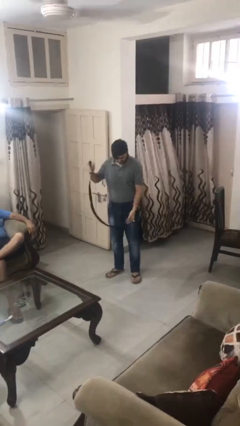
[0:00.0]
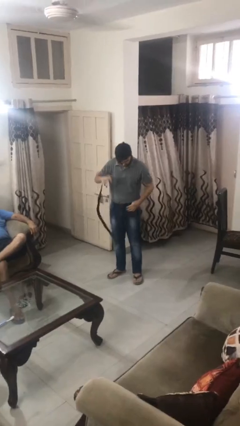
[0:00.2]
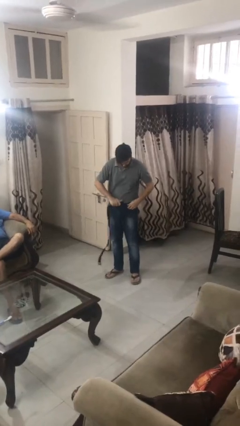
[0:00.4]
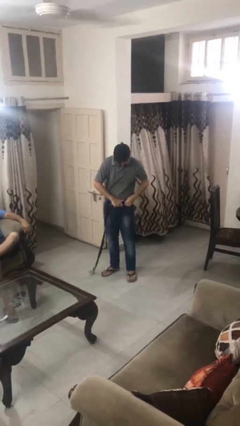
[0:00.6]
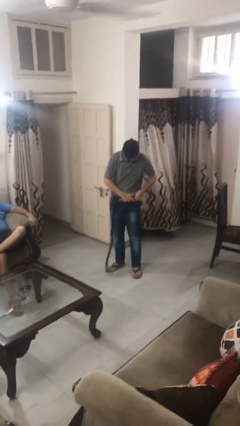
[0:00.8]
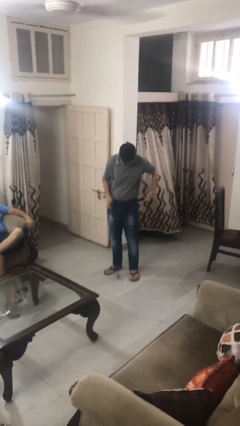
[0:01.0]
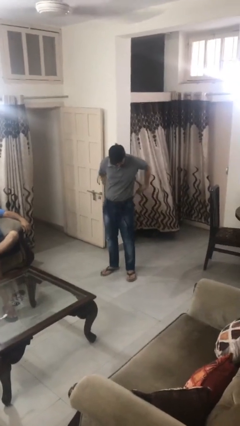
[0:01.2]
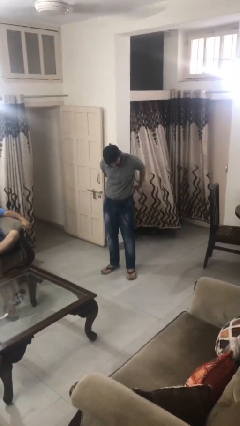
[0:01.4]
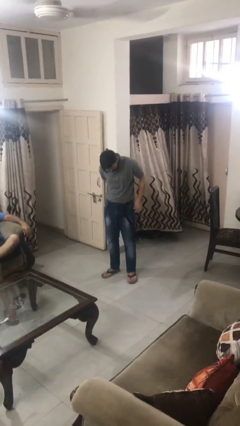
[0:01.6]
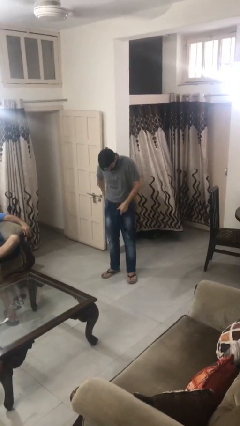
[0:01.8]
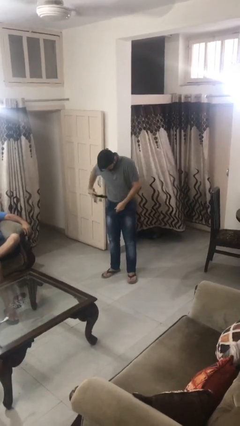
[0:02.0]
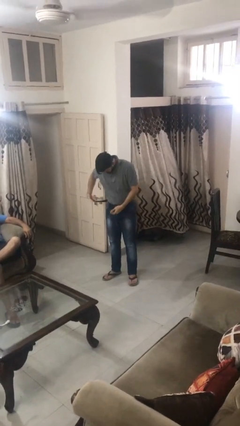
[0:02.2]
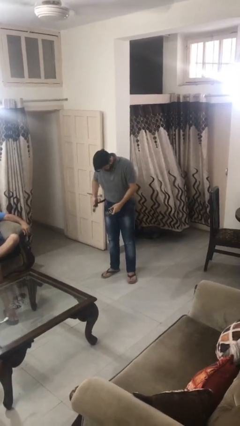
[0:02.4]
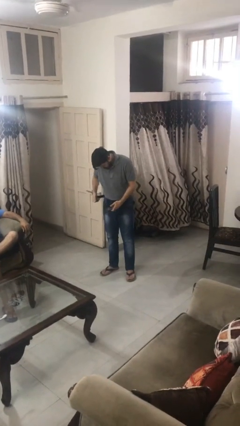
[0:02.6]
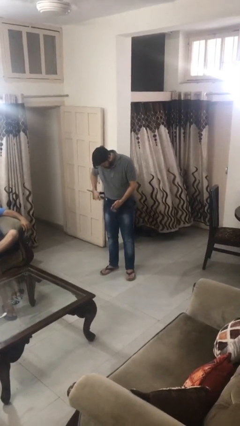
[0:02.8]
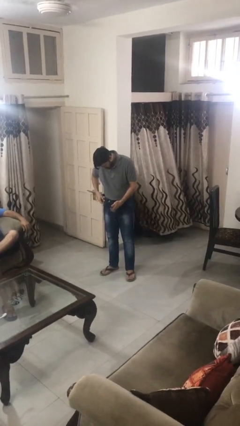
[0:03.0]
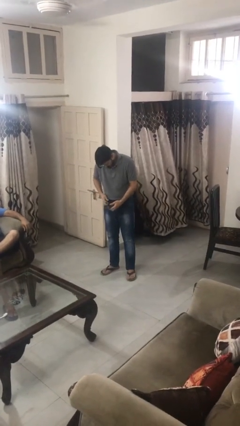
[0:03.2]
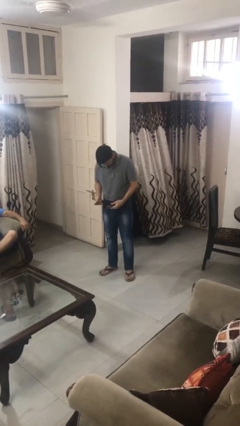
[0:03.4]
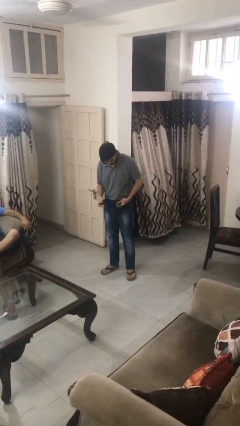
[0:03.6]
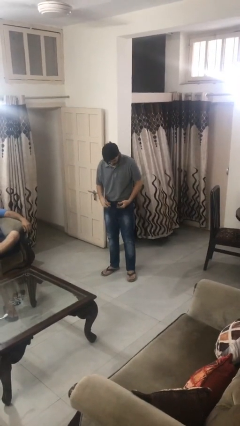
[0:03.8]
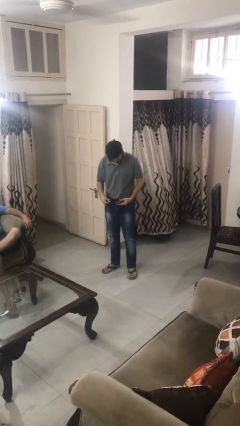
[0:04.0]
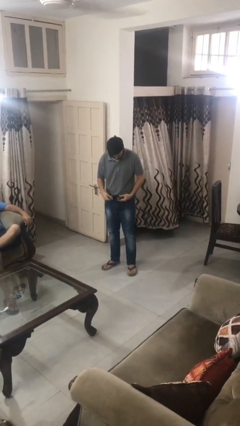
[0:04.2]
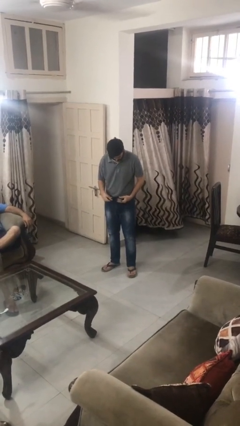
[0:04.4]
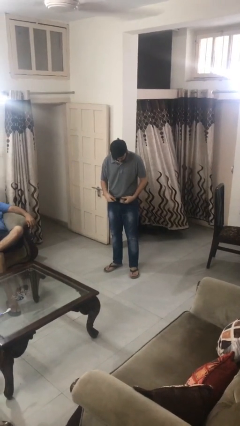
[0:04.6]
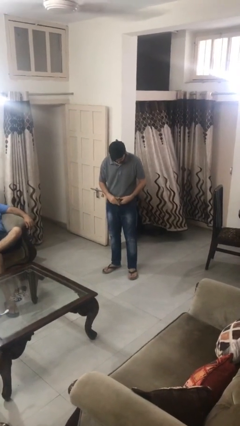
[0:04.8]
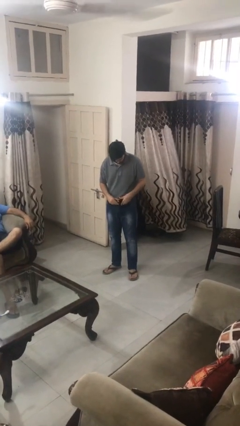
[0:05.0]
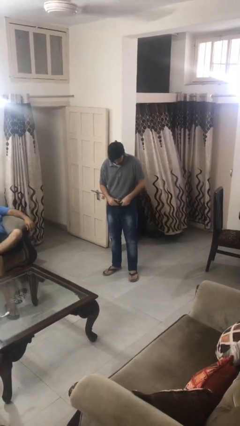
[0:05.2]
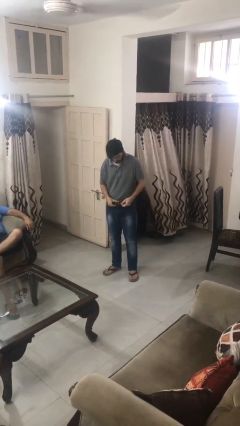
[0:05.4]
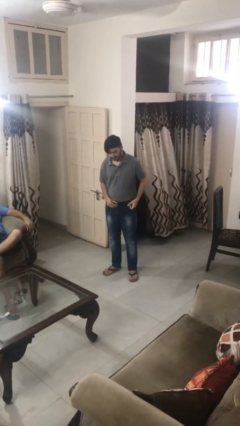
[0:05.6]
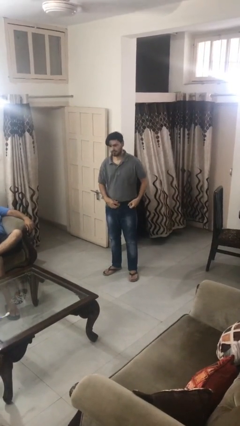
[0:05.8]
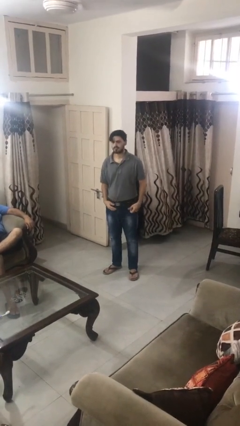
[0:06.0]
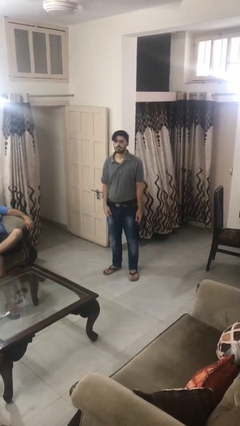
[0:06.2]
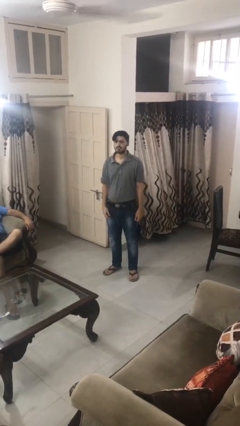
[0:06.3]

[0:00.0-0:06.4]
person puts on belt

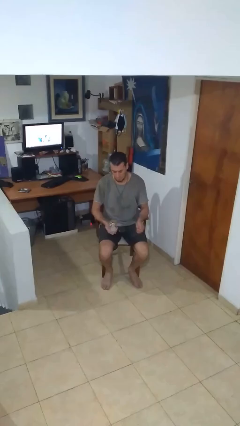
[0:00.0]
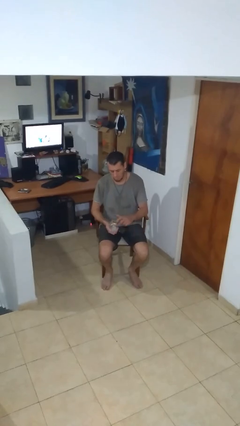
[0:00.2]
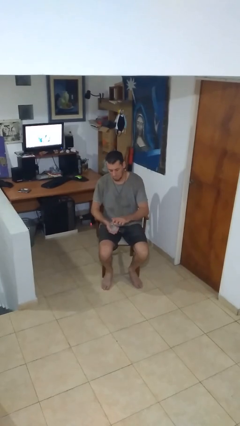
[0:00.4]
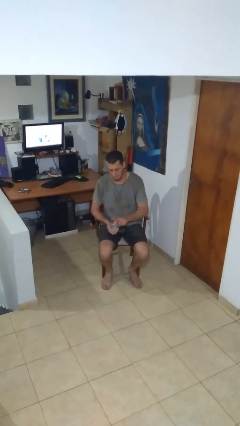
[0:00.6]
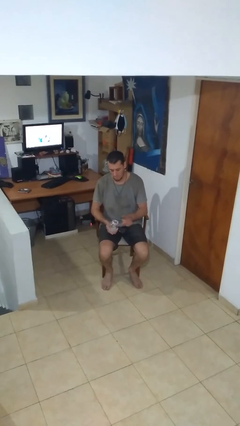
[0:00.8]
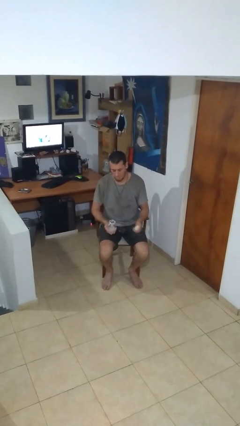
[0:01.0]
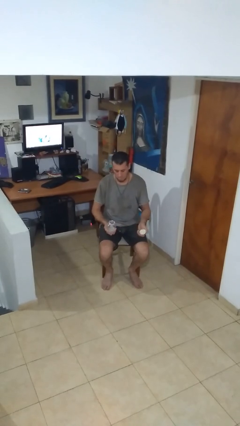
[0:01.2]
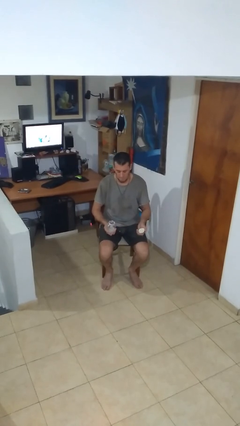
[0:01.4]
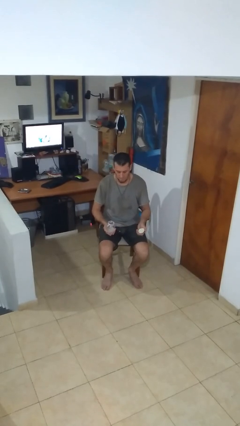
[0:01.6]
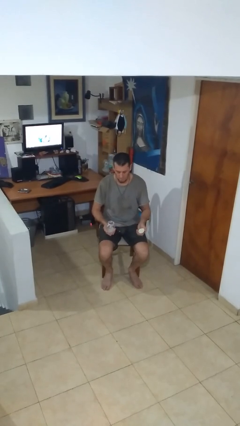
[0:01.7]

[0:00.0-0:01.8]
person opens jar

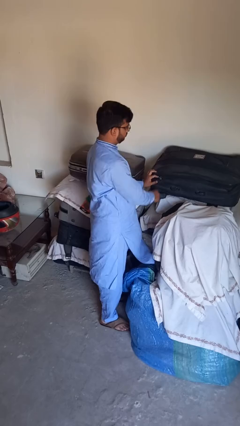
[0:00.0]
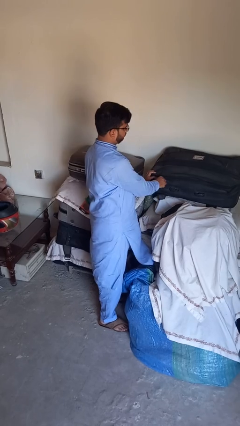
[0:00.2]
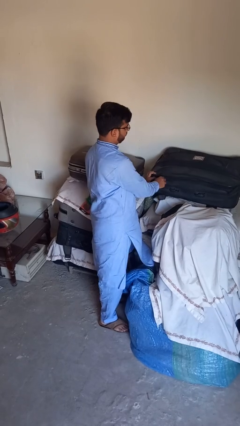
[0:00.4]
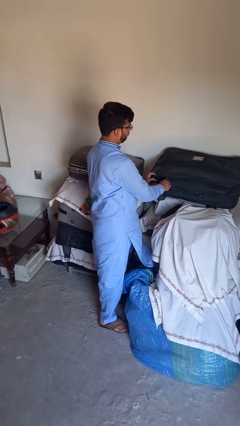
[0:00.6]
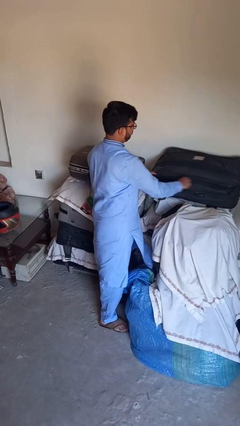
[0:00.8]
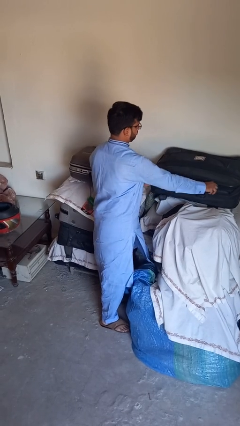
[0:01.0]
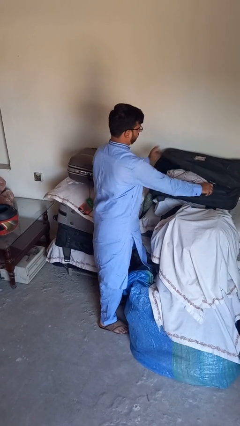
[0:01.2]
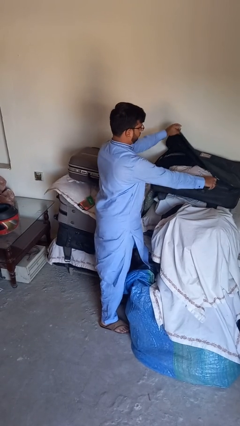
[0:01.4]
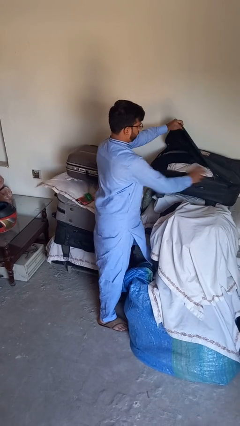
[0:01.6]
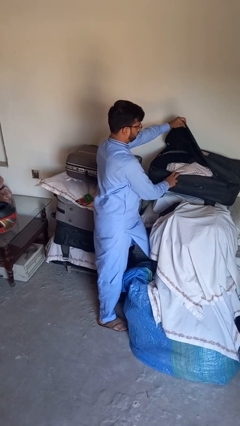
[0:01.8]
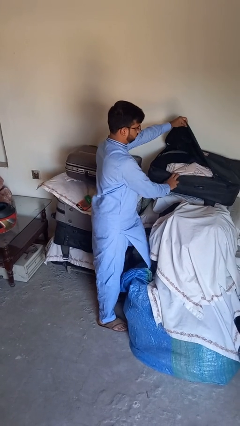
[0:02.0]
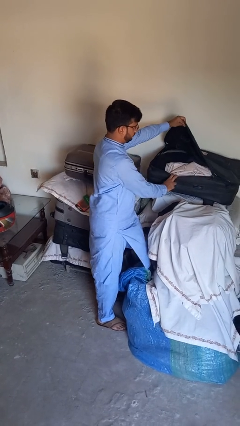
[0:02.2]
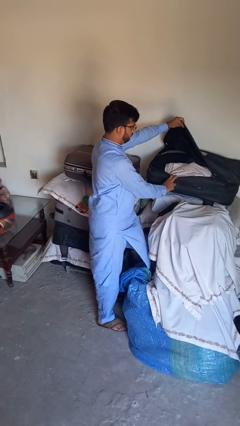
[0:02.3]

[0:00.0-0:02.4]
person opens suitcase

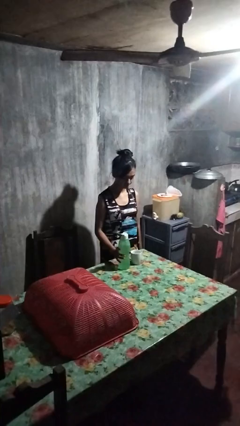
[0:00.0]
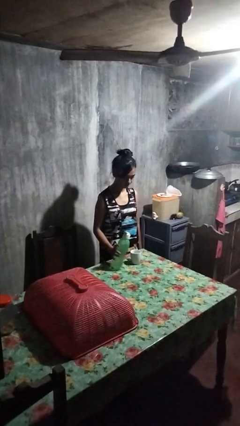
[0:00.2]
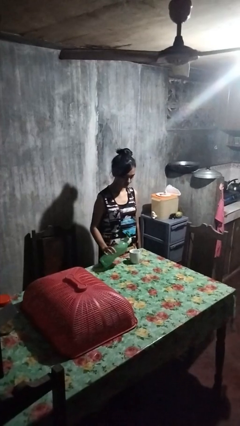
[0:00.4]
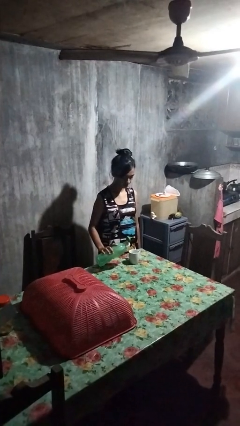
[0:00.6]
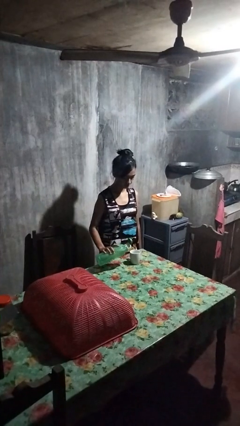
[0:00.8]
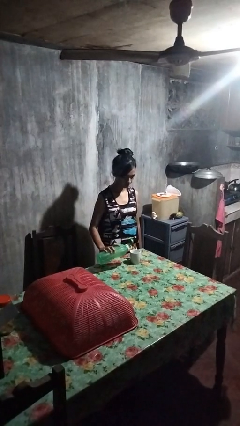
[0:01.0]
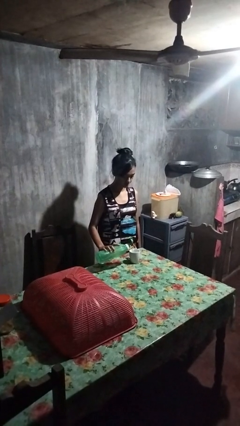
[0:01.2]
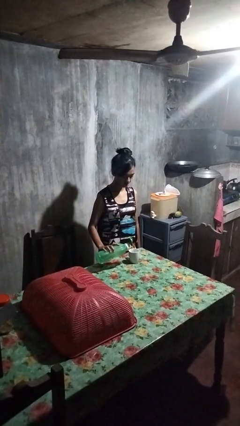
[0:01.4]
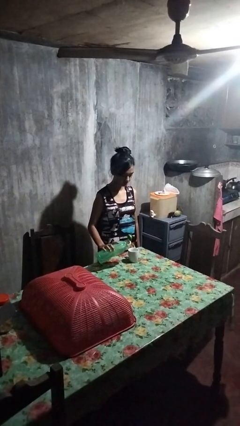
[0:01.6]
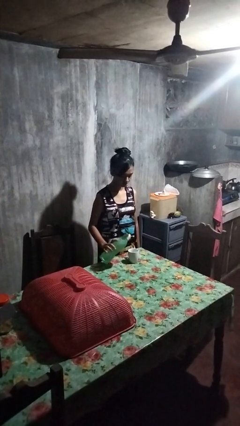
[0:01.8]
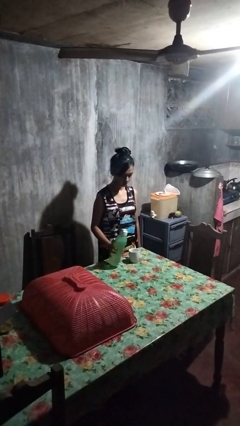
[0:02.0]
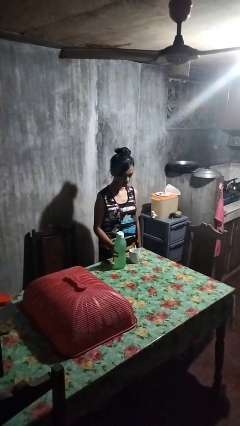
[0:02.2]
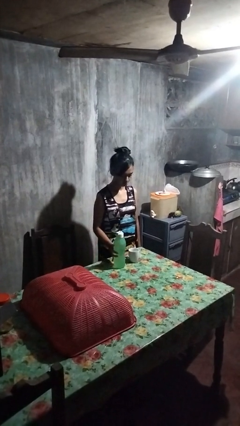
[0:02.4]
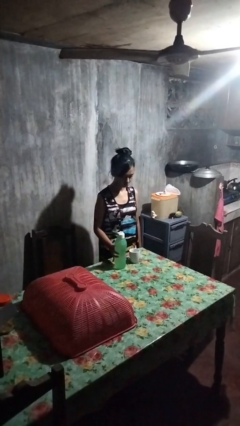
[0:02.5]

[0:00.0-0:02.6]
person pours liquid into cup

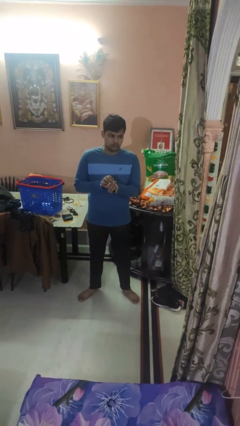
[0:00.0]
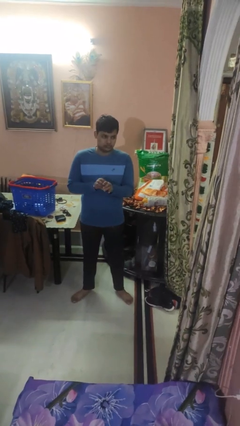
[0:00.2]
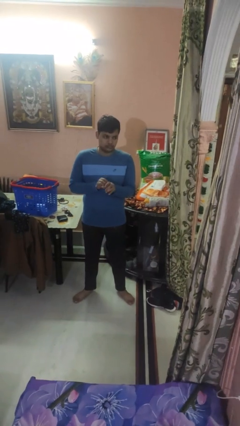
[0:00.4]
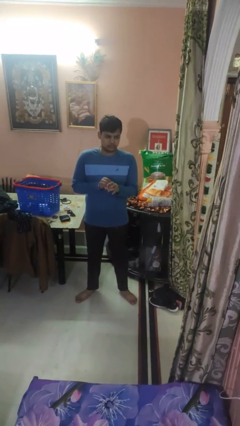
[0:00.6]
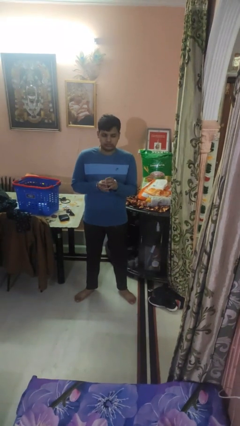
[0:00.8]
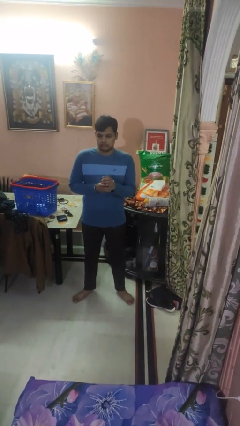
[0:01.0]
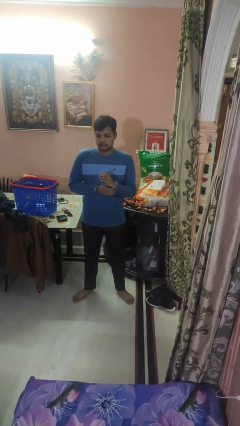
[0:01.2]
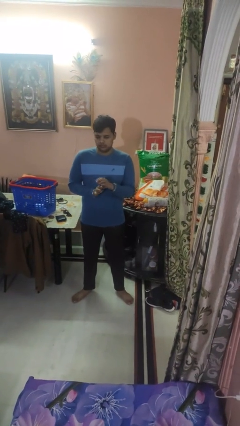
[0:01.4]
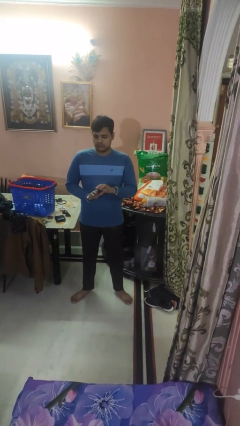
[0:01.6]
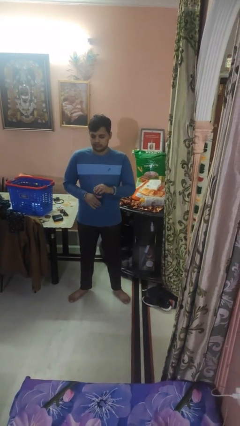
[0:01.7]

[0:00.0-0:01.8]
person puts on wristwatch

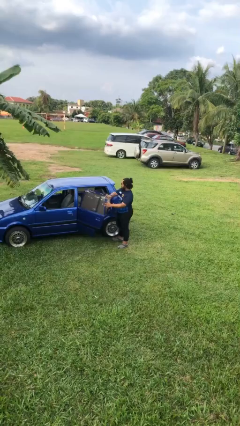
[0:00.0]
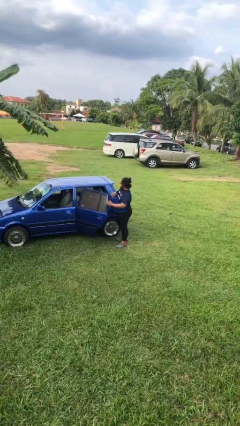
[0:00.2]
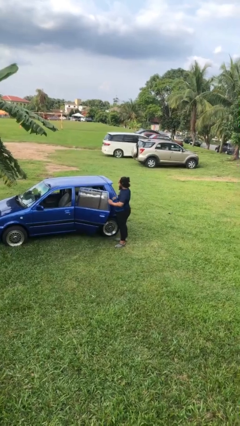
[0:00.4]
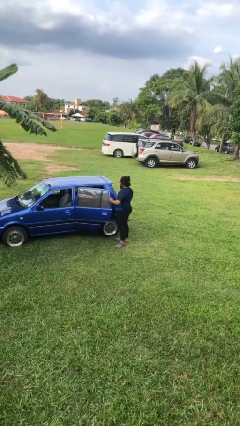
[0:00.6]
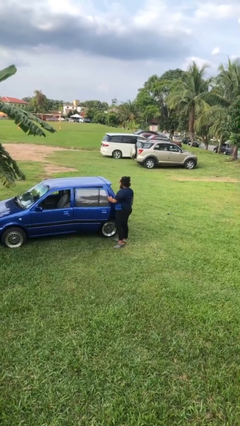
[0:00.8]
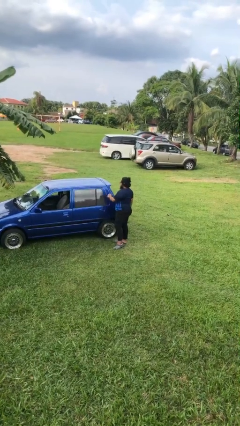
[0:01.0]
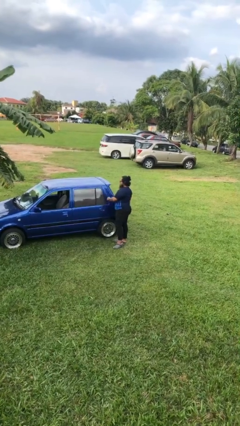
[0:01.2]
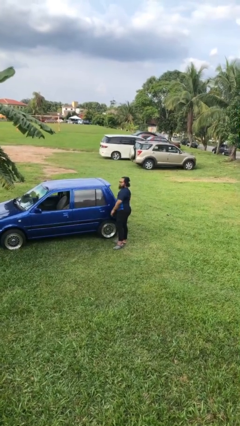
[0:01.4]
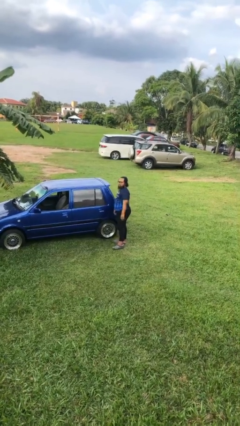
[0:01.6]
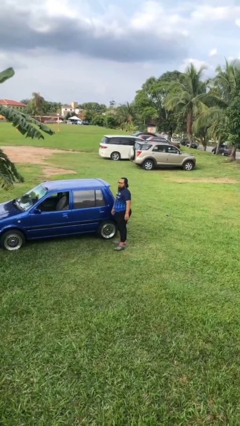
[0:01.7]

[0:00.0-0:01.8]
person closes car door

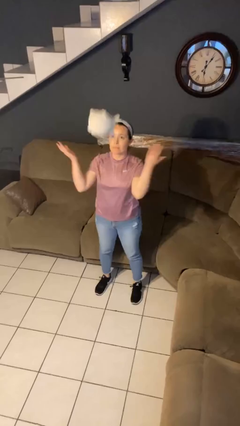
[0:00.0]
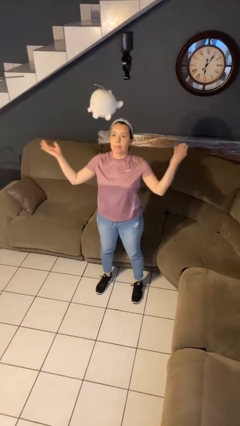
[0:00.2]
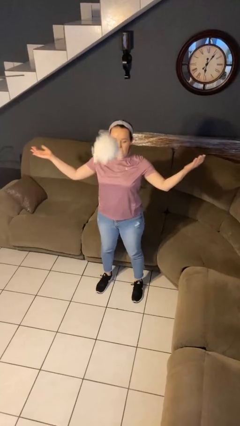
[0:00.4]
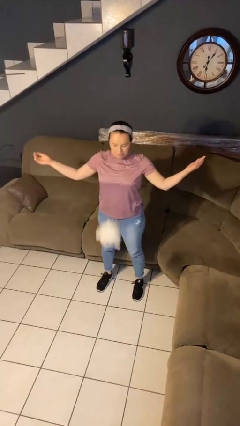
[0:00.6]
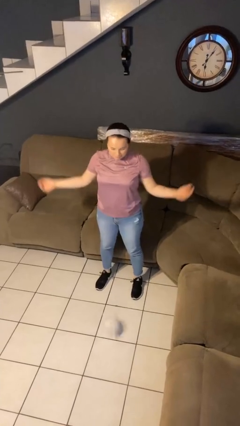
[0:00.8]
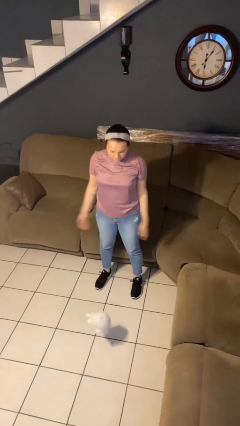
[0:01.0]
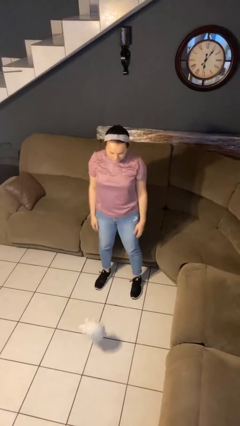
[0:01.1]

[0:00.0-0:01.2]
person throws object into air
